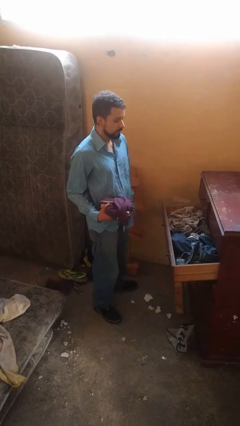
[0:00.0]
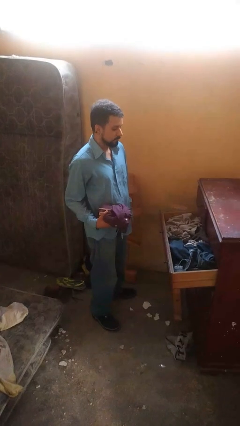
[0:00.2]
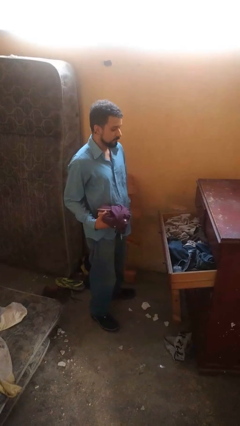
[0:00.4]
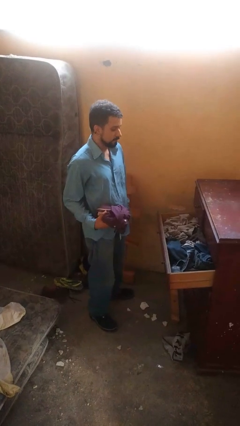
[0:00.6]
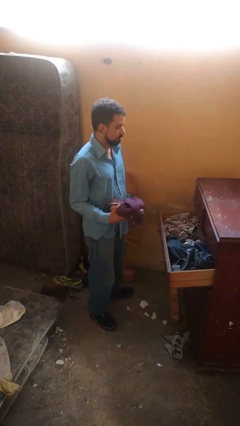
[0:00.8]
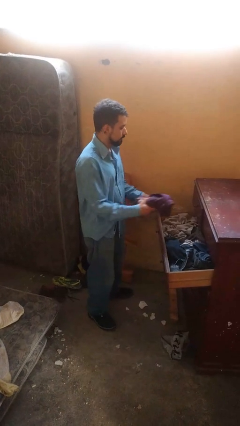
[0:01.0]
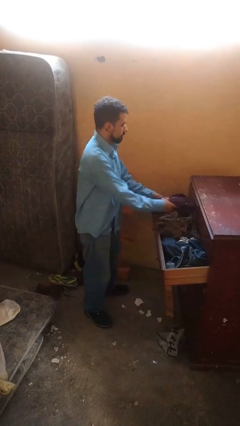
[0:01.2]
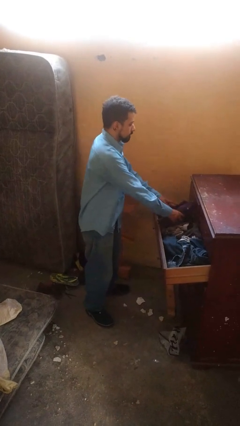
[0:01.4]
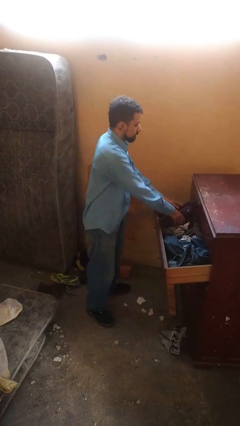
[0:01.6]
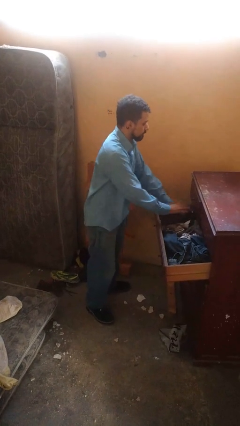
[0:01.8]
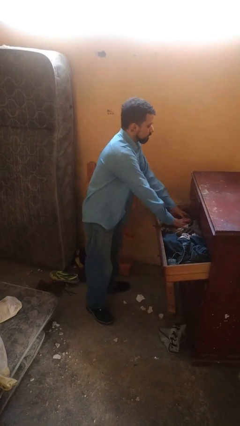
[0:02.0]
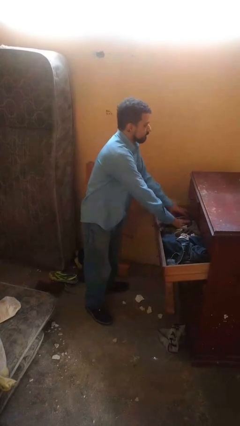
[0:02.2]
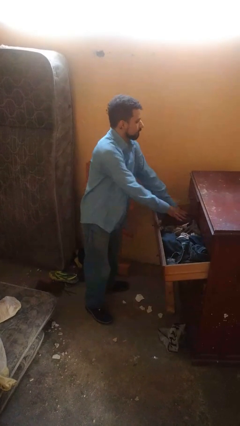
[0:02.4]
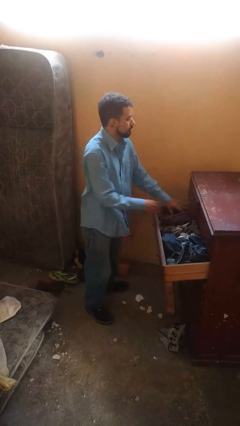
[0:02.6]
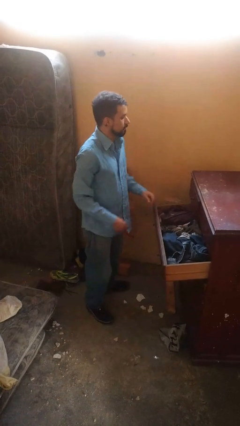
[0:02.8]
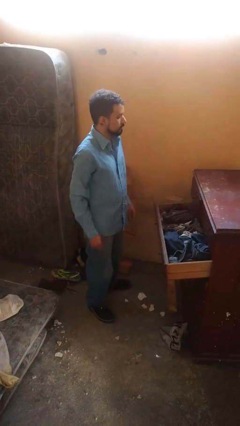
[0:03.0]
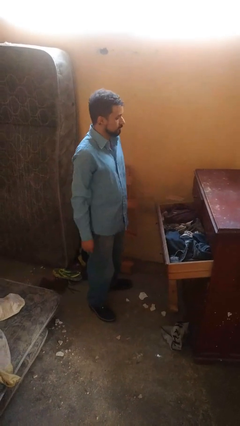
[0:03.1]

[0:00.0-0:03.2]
person puts clothes into dresser

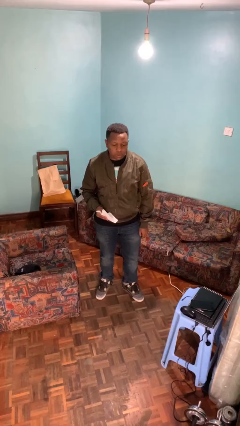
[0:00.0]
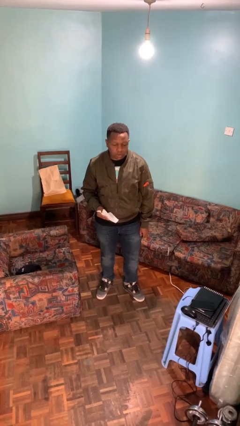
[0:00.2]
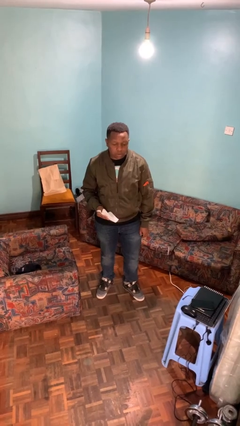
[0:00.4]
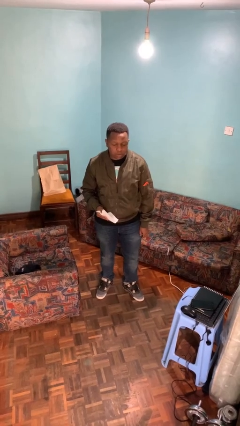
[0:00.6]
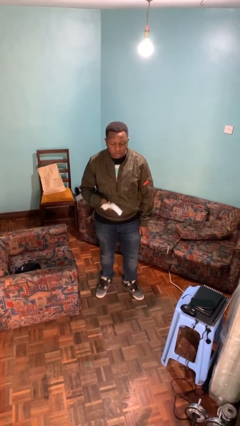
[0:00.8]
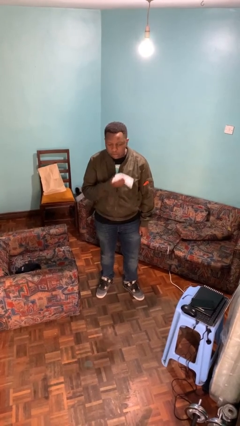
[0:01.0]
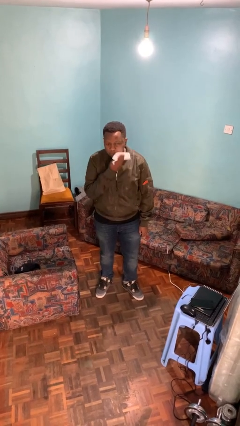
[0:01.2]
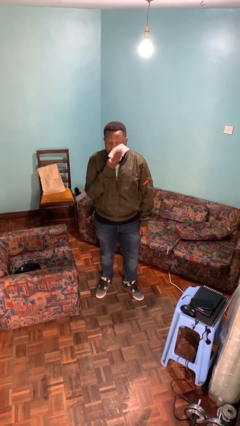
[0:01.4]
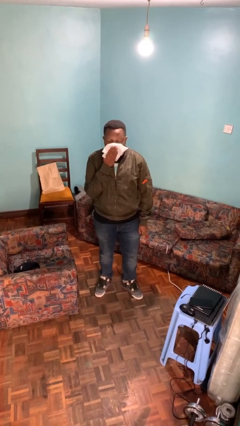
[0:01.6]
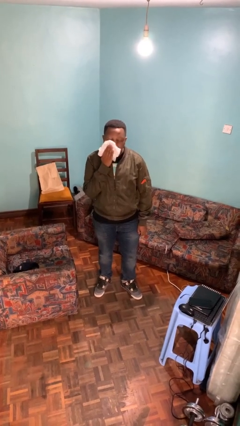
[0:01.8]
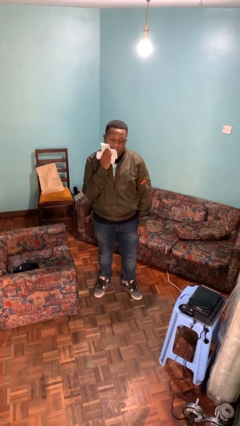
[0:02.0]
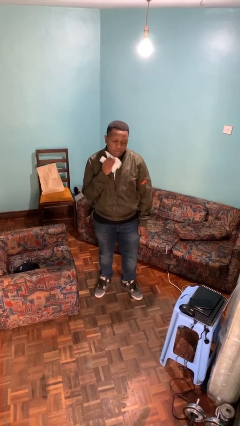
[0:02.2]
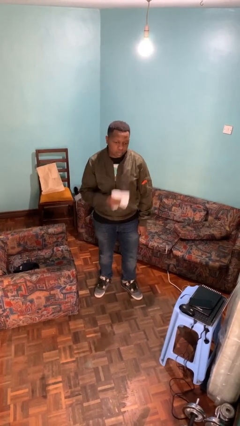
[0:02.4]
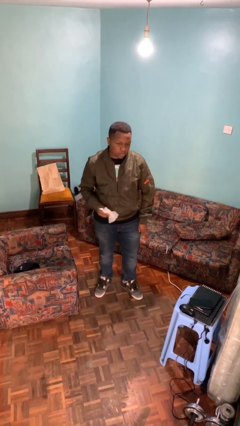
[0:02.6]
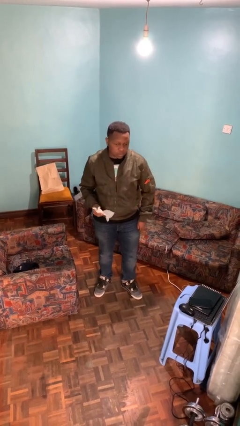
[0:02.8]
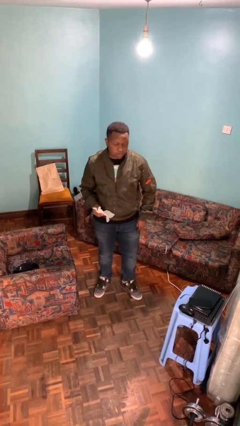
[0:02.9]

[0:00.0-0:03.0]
person wipes mouth with napkin

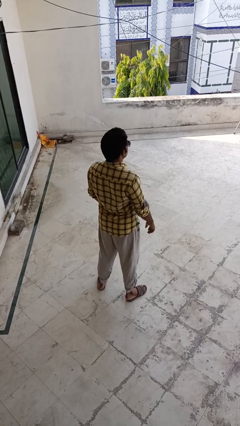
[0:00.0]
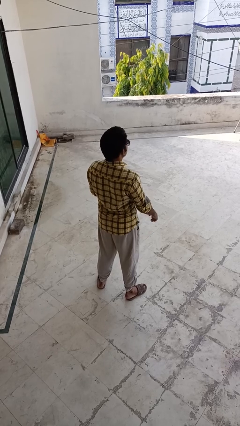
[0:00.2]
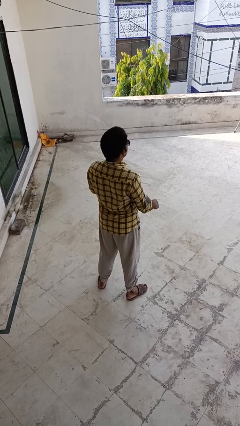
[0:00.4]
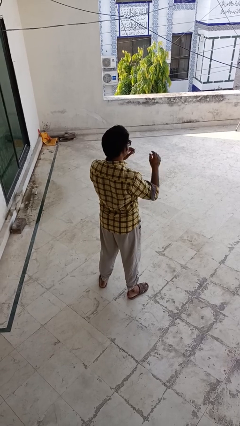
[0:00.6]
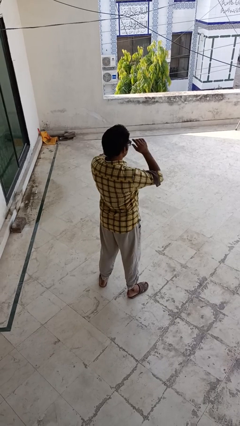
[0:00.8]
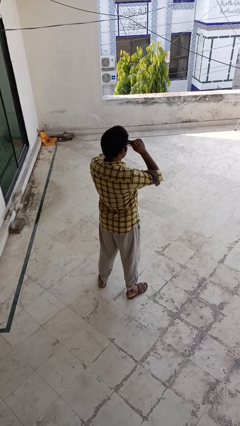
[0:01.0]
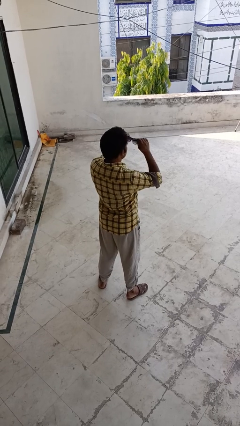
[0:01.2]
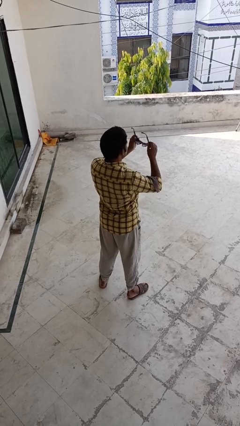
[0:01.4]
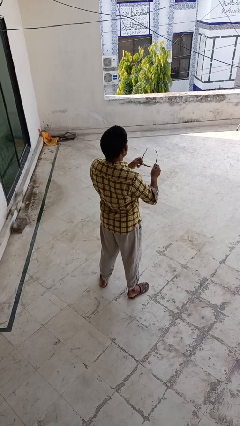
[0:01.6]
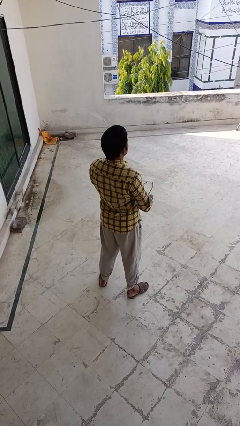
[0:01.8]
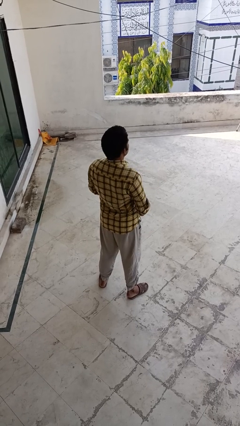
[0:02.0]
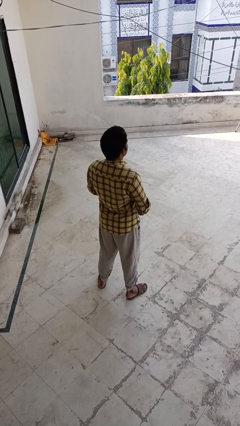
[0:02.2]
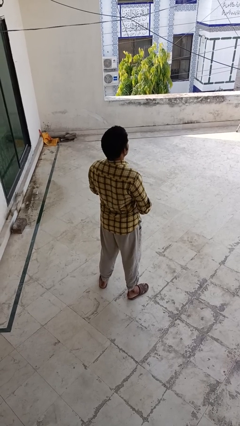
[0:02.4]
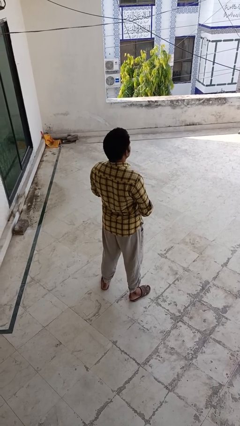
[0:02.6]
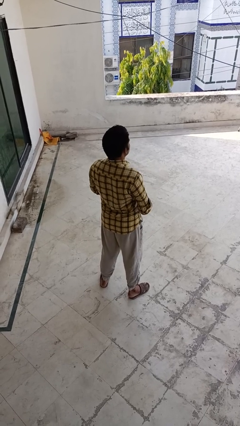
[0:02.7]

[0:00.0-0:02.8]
person takes off sunglasses

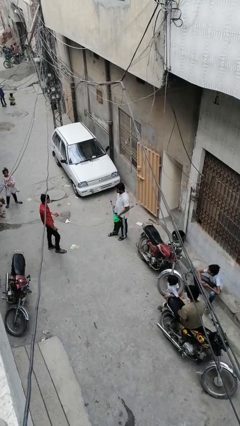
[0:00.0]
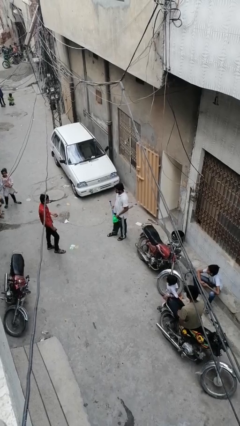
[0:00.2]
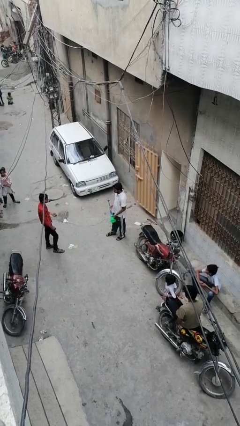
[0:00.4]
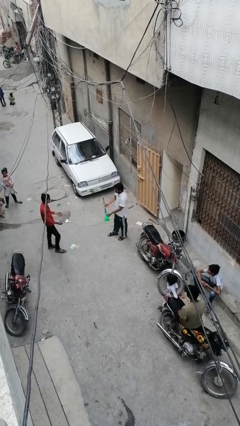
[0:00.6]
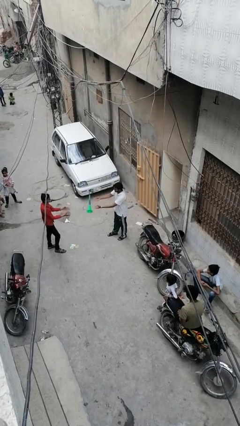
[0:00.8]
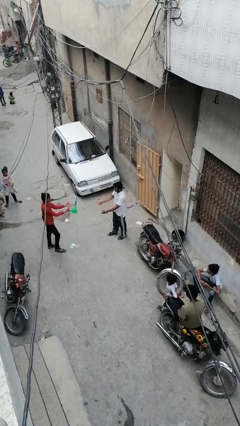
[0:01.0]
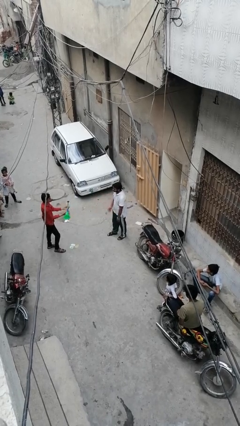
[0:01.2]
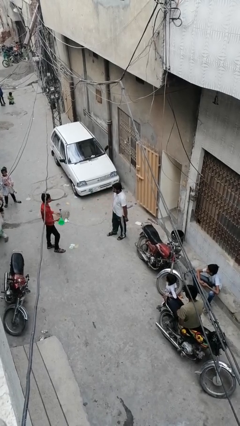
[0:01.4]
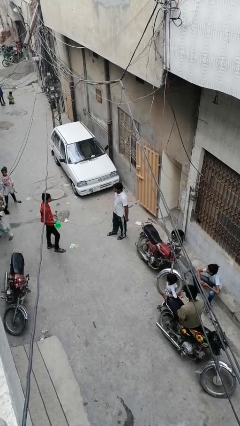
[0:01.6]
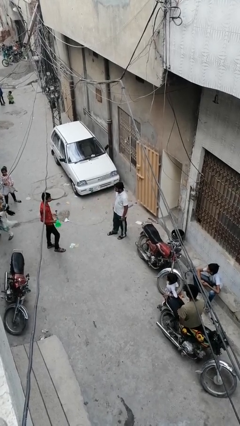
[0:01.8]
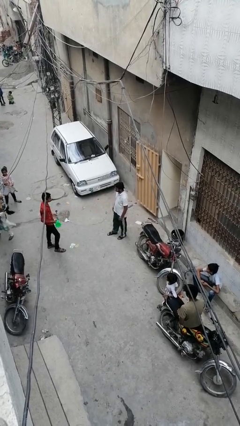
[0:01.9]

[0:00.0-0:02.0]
person throws object to person

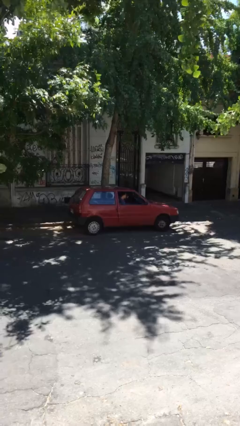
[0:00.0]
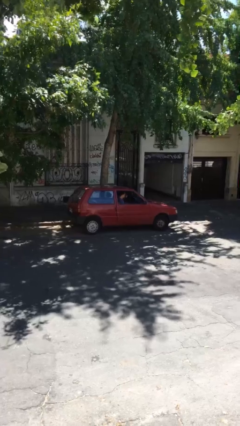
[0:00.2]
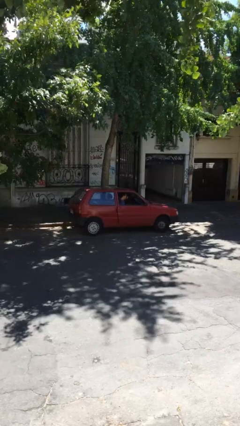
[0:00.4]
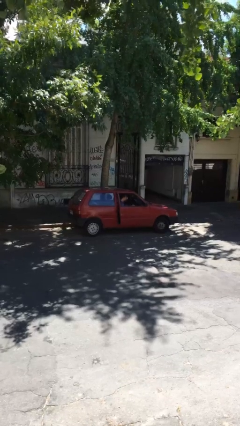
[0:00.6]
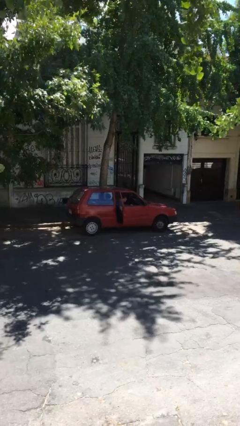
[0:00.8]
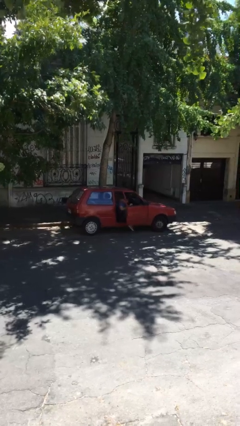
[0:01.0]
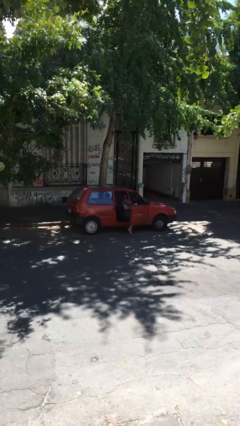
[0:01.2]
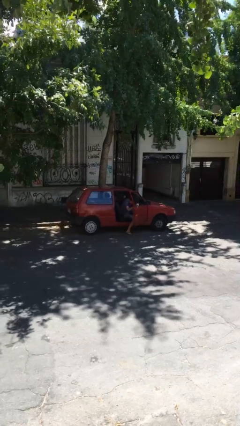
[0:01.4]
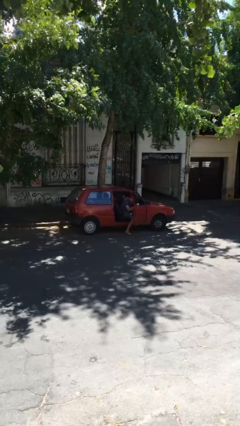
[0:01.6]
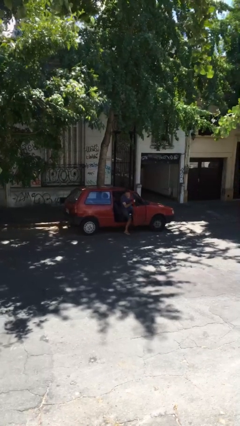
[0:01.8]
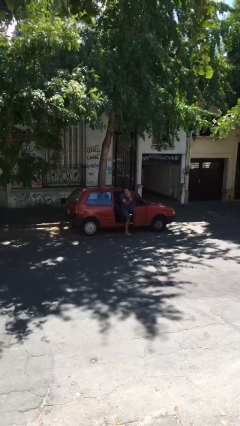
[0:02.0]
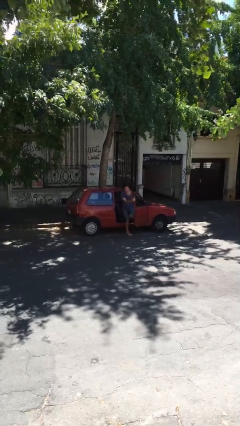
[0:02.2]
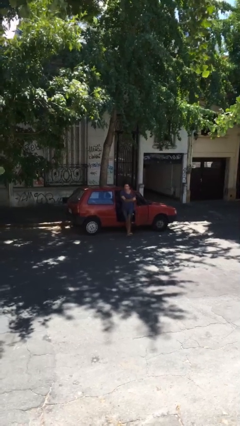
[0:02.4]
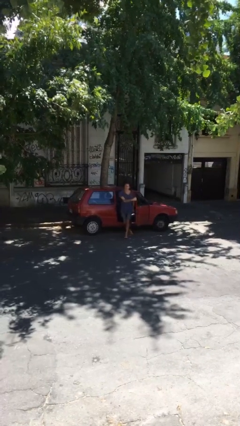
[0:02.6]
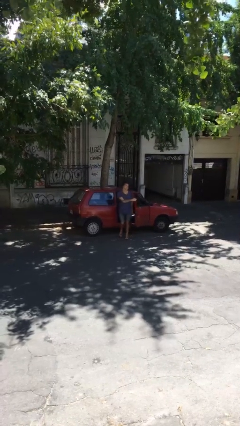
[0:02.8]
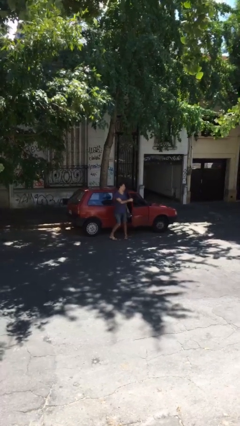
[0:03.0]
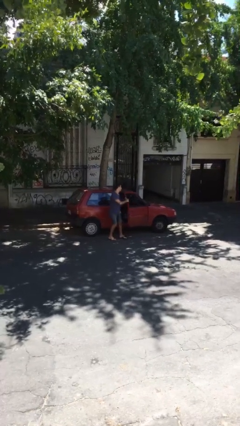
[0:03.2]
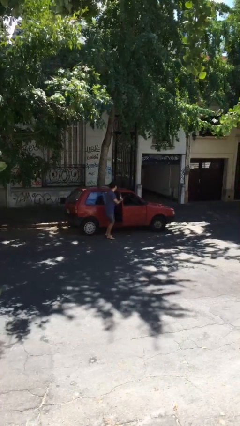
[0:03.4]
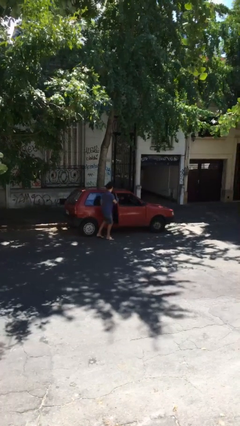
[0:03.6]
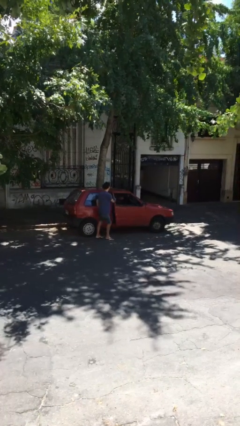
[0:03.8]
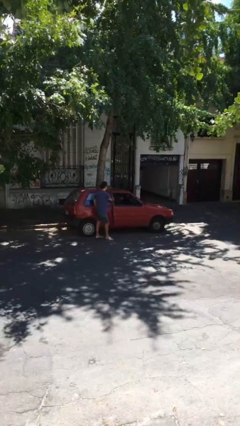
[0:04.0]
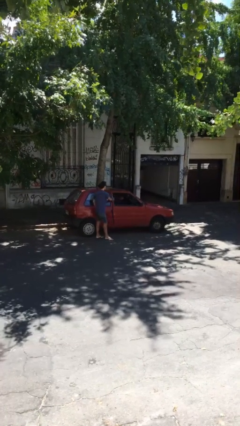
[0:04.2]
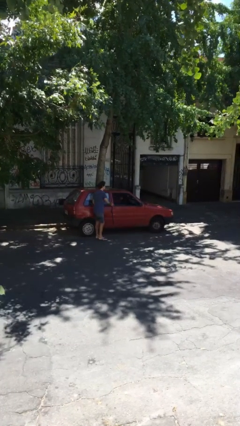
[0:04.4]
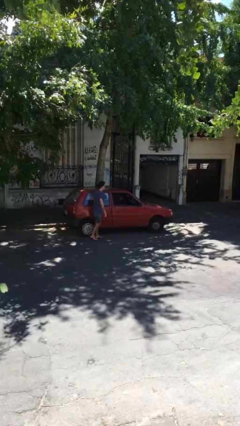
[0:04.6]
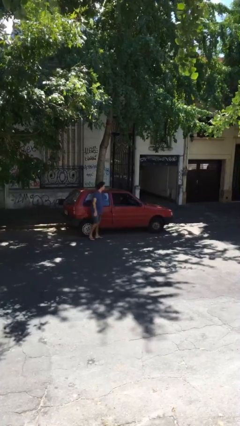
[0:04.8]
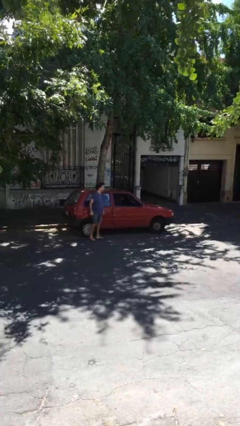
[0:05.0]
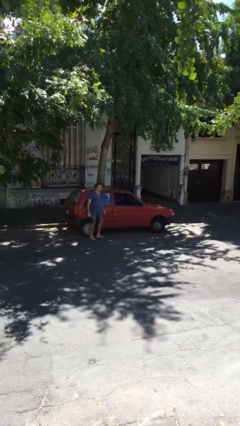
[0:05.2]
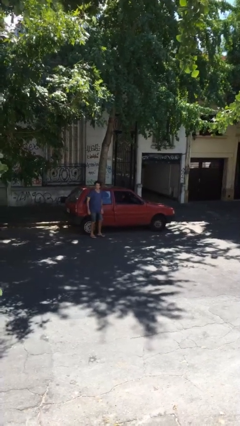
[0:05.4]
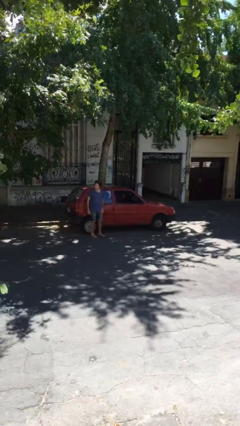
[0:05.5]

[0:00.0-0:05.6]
car drops off person

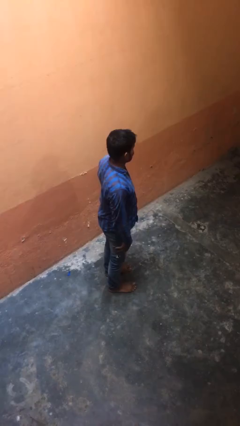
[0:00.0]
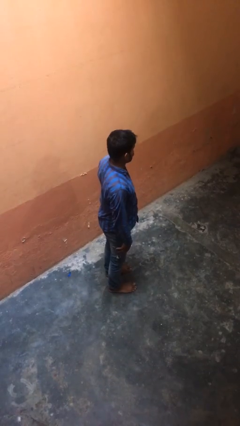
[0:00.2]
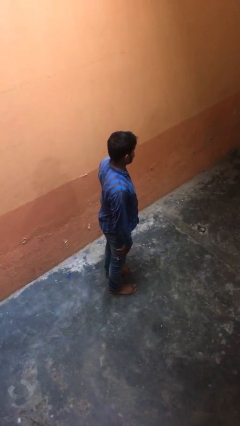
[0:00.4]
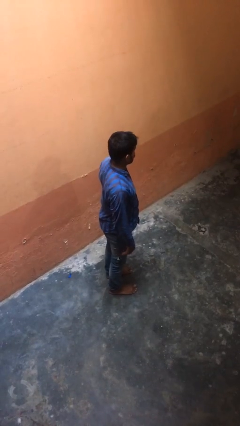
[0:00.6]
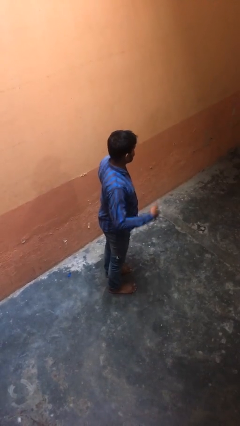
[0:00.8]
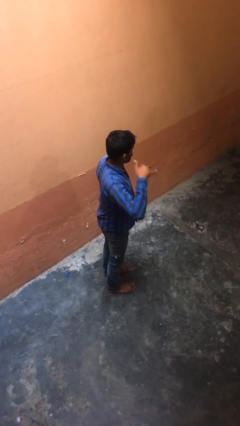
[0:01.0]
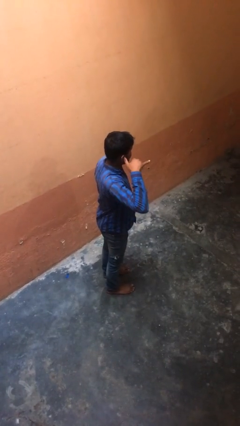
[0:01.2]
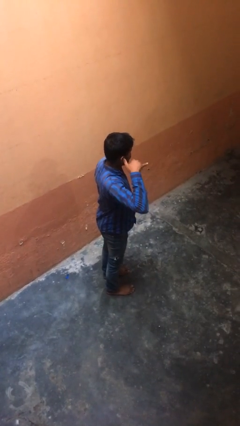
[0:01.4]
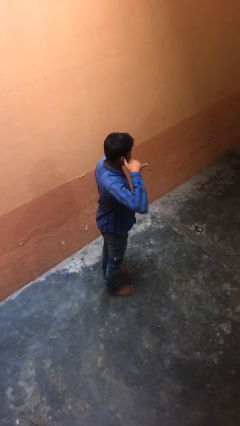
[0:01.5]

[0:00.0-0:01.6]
person gestures call me
